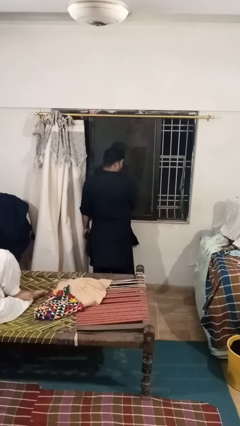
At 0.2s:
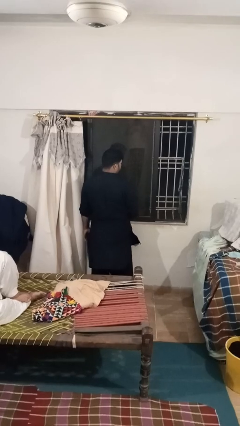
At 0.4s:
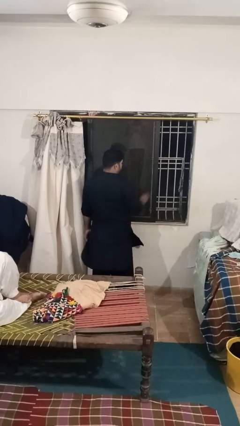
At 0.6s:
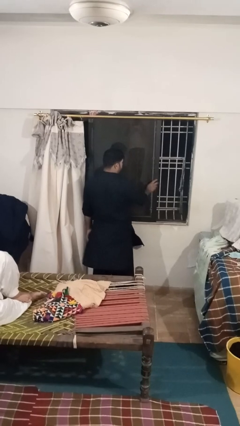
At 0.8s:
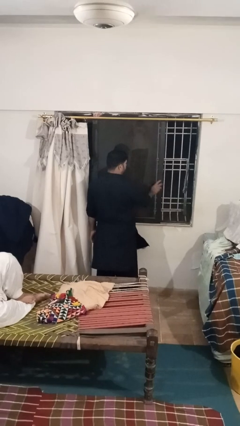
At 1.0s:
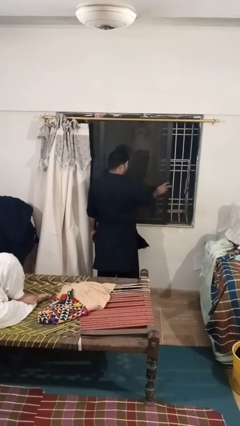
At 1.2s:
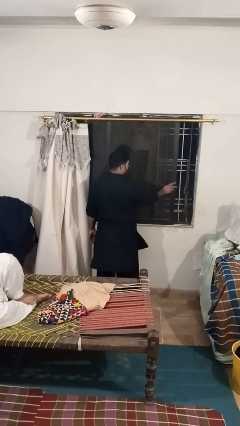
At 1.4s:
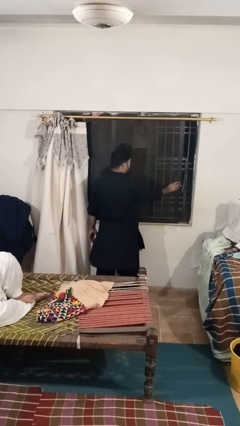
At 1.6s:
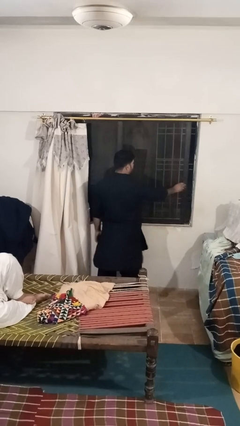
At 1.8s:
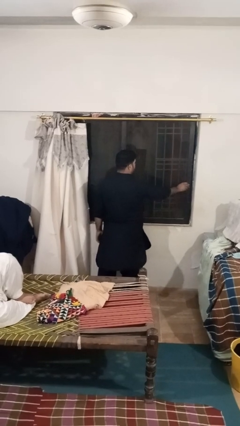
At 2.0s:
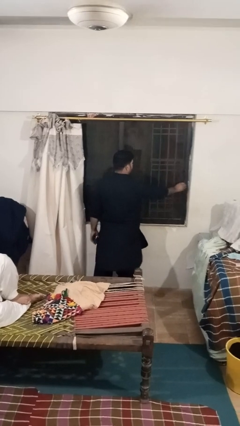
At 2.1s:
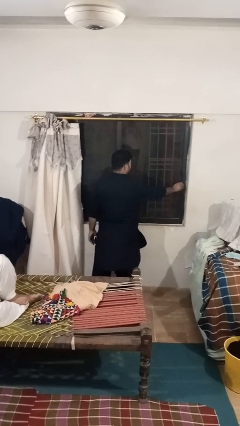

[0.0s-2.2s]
person closes sliding door

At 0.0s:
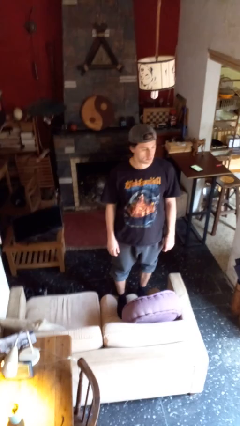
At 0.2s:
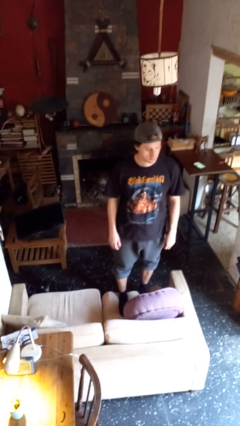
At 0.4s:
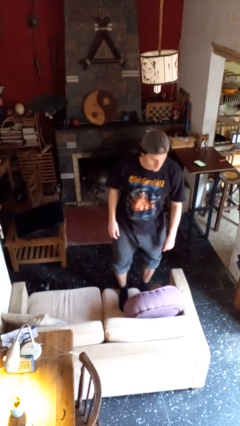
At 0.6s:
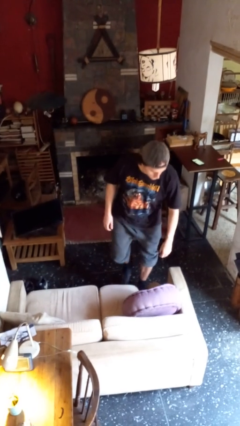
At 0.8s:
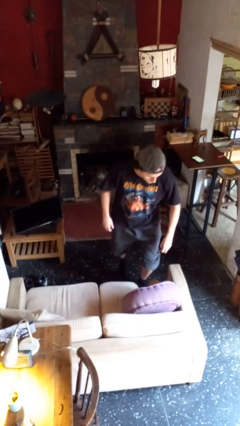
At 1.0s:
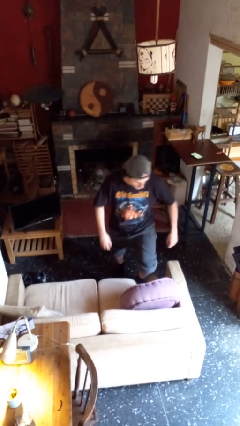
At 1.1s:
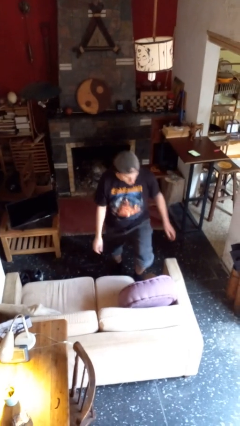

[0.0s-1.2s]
person climbs off couch

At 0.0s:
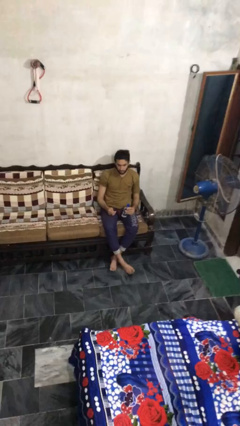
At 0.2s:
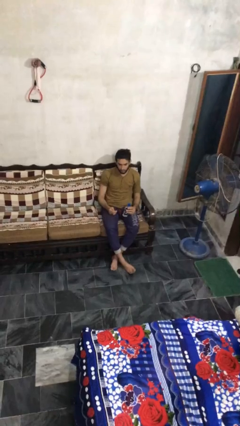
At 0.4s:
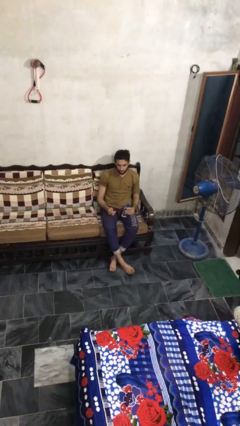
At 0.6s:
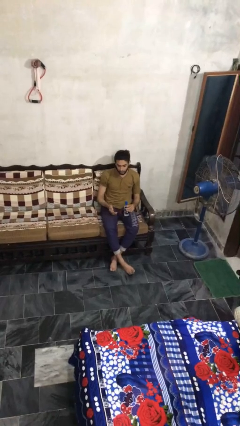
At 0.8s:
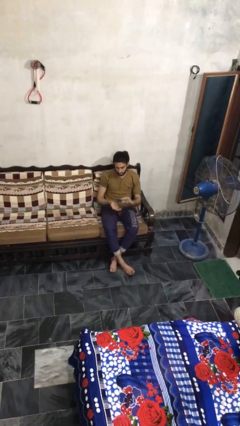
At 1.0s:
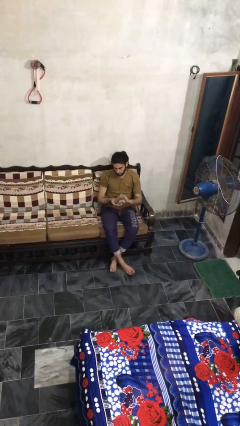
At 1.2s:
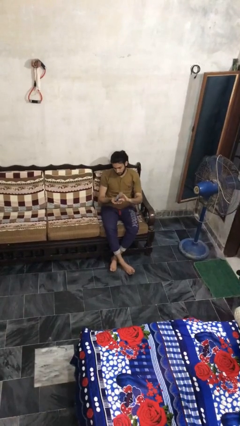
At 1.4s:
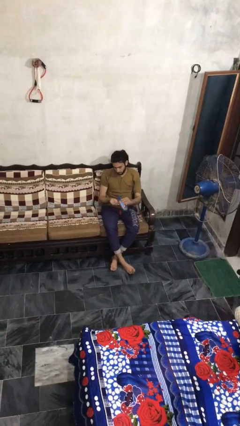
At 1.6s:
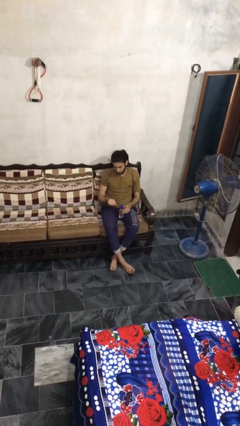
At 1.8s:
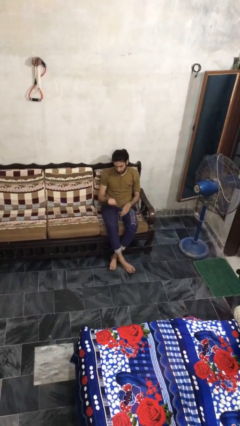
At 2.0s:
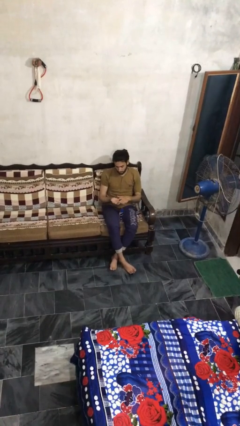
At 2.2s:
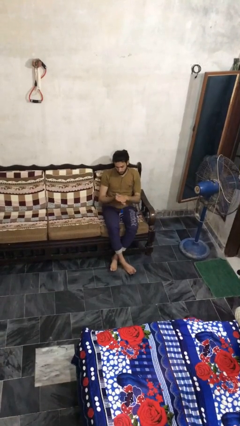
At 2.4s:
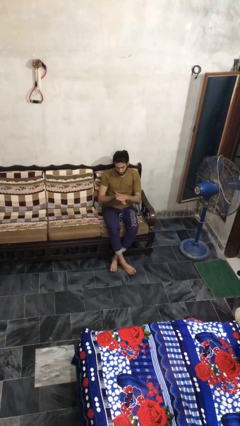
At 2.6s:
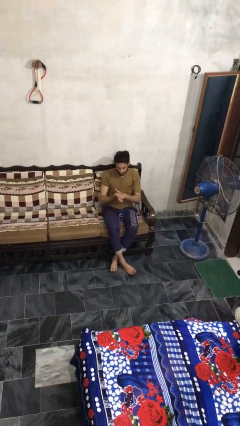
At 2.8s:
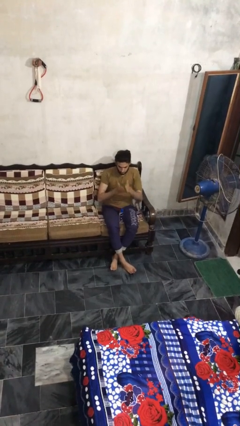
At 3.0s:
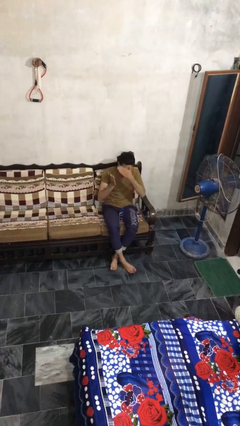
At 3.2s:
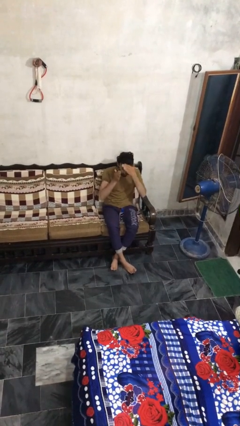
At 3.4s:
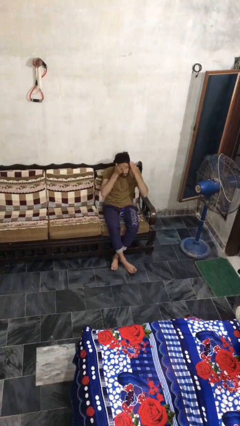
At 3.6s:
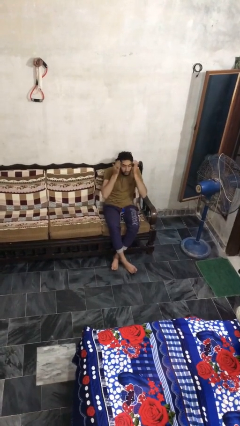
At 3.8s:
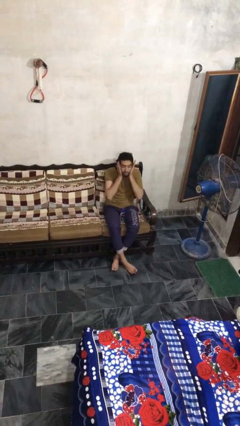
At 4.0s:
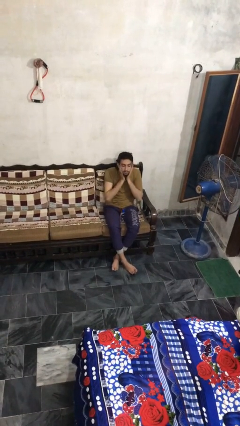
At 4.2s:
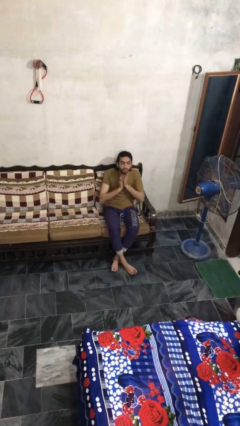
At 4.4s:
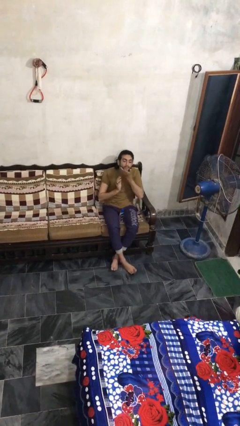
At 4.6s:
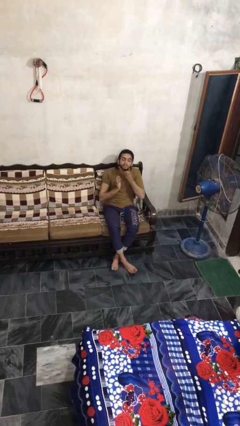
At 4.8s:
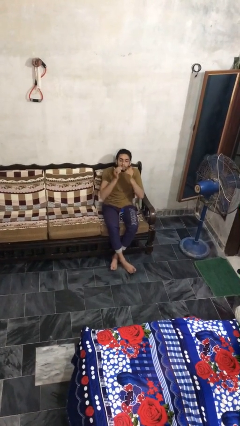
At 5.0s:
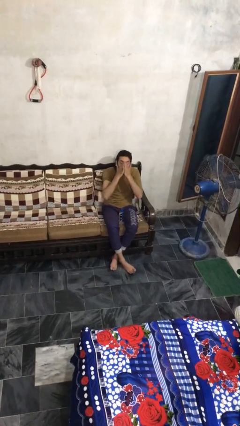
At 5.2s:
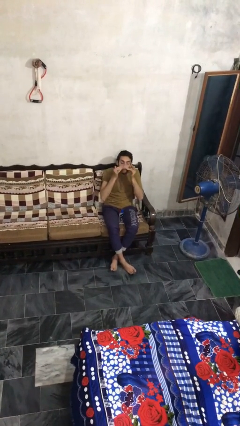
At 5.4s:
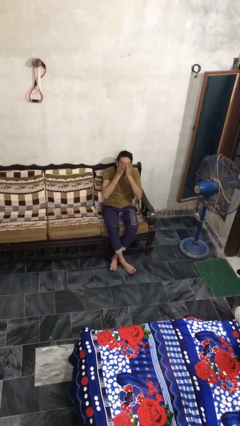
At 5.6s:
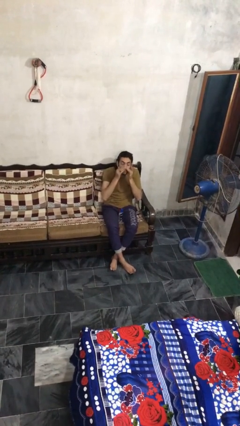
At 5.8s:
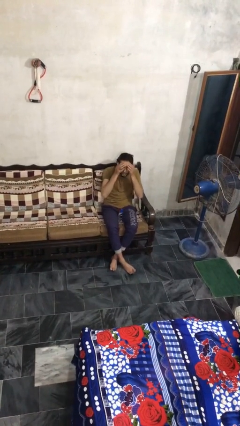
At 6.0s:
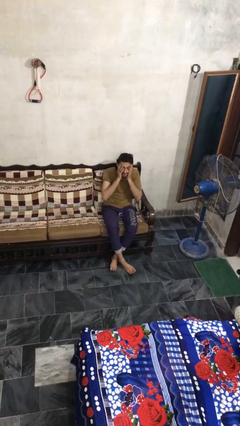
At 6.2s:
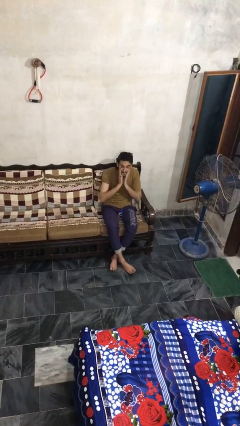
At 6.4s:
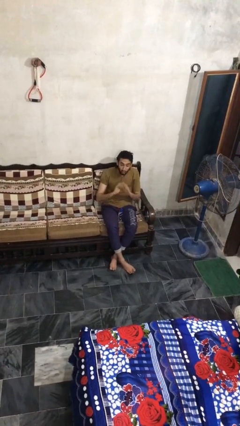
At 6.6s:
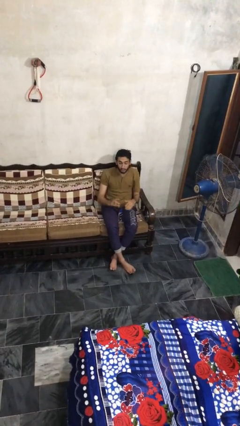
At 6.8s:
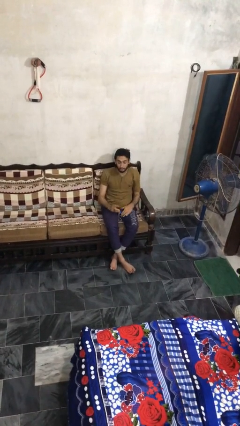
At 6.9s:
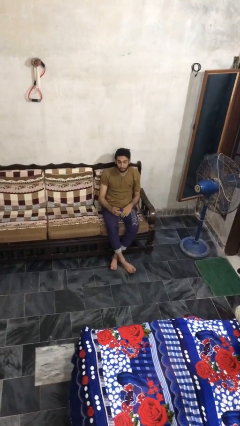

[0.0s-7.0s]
person applies facial moisturizer

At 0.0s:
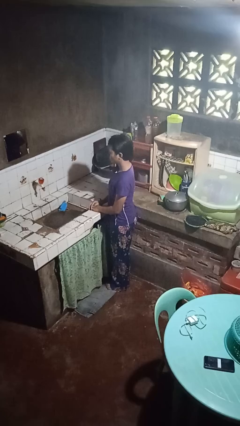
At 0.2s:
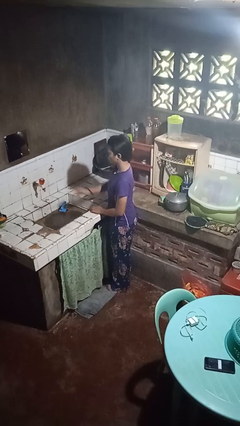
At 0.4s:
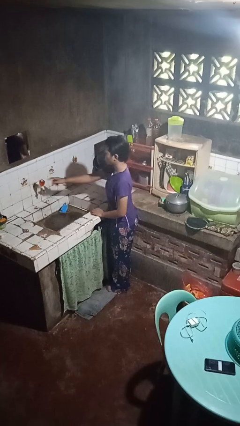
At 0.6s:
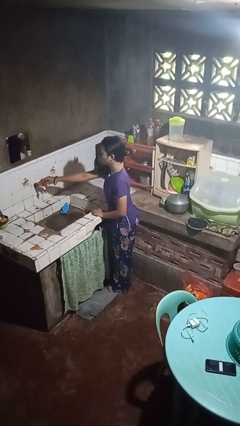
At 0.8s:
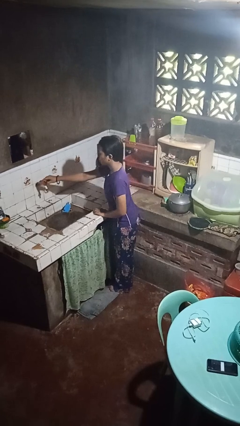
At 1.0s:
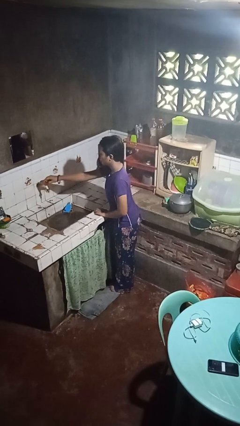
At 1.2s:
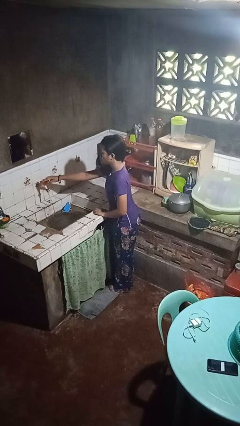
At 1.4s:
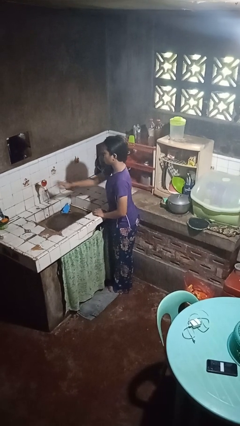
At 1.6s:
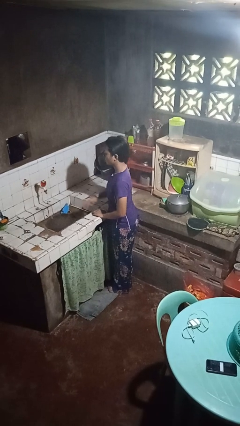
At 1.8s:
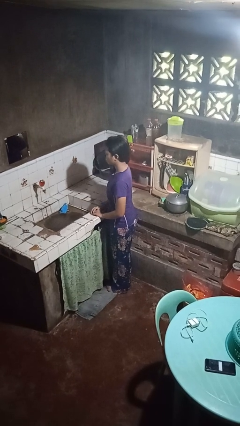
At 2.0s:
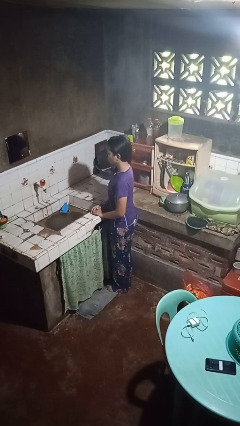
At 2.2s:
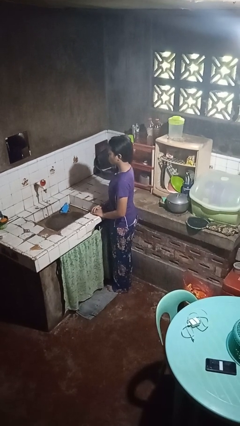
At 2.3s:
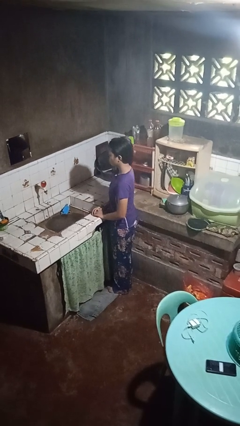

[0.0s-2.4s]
person turns on faucet

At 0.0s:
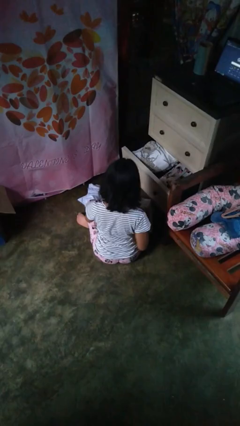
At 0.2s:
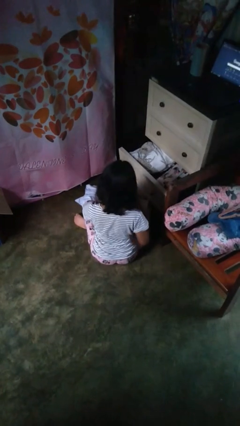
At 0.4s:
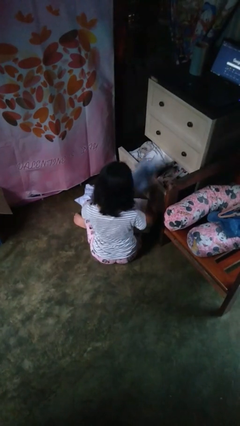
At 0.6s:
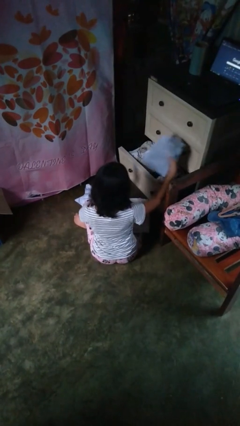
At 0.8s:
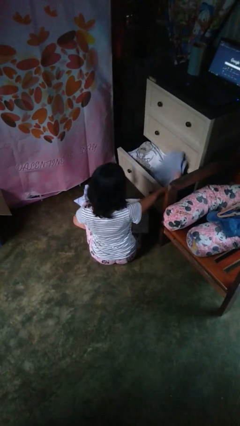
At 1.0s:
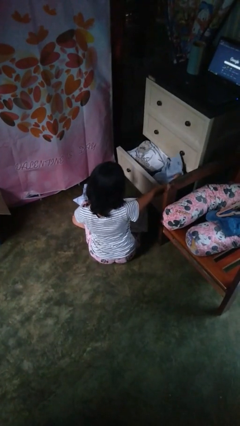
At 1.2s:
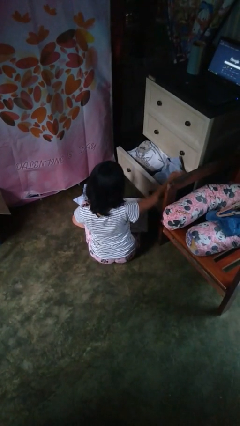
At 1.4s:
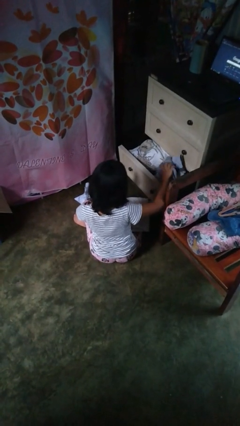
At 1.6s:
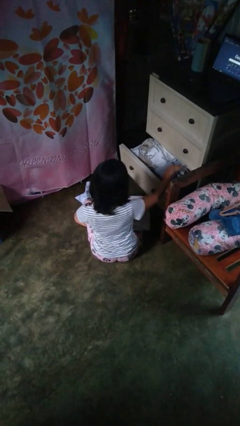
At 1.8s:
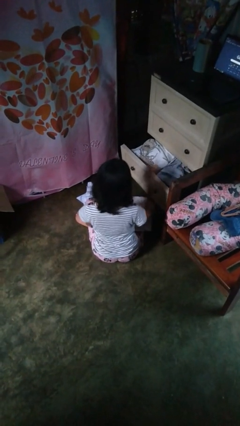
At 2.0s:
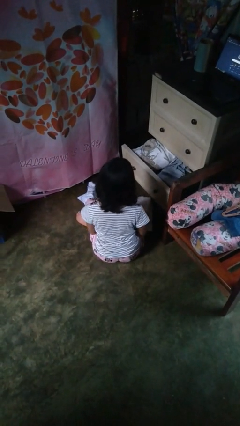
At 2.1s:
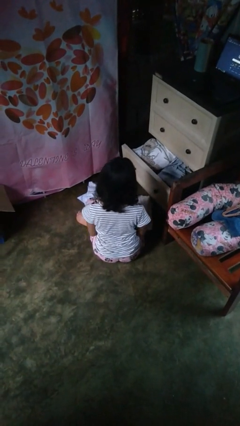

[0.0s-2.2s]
person puts clothes into dresser

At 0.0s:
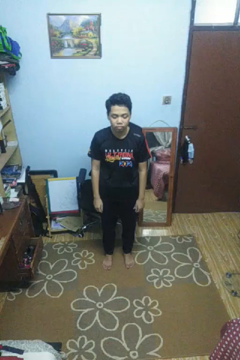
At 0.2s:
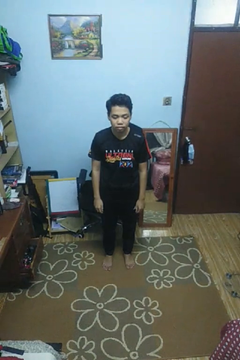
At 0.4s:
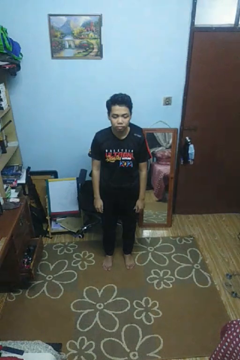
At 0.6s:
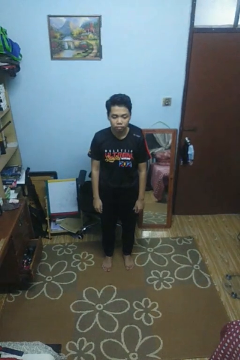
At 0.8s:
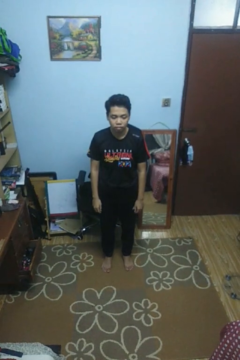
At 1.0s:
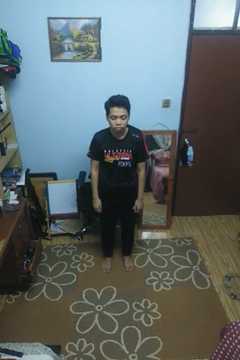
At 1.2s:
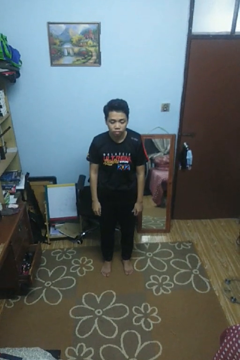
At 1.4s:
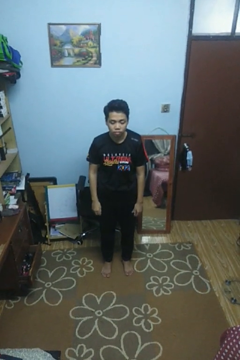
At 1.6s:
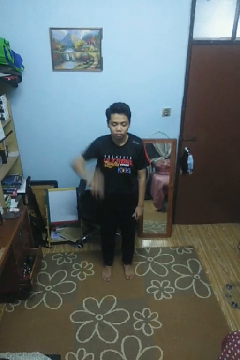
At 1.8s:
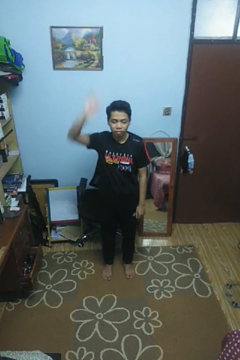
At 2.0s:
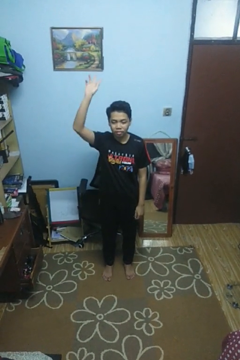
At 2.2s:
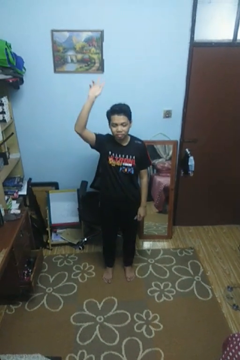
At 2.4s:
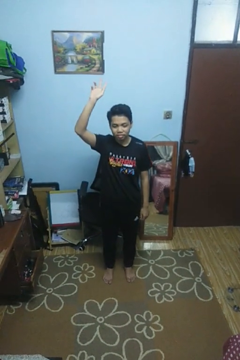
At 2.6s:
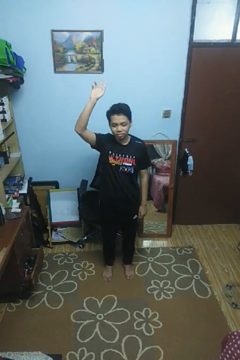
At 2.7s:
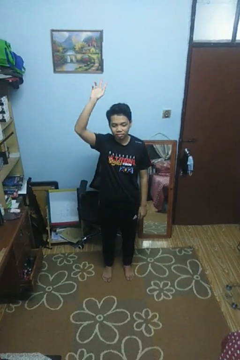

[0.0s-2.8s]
person gestures raise hand
